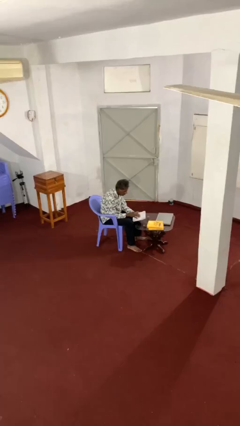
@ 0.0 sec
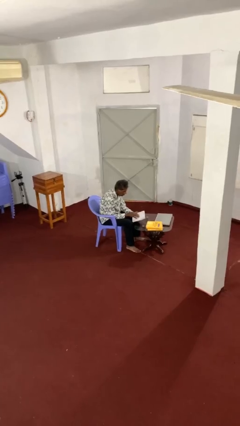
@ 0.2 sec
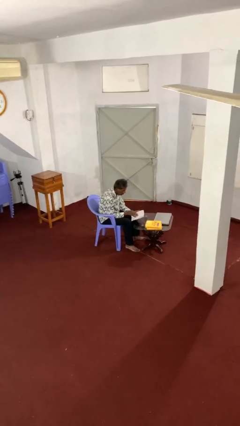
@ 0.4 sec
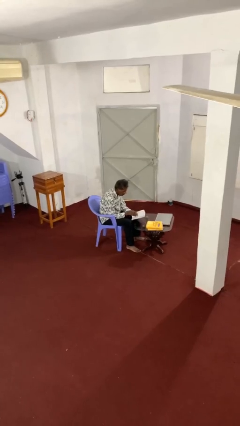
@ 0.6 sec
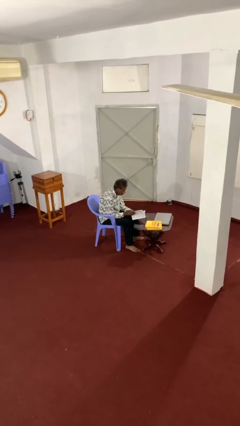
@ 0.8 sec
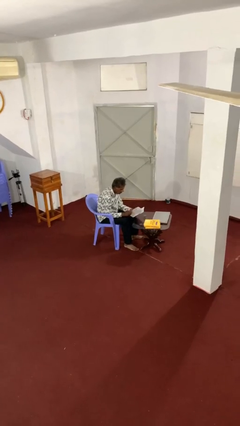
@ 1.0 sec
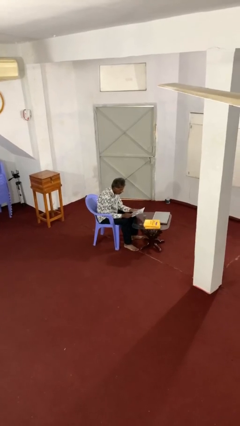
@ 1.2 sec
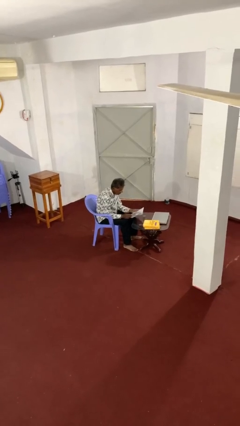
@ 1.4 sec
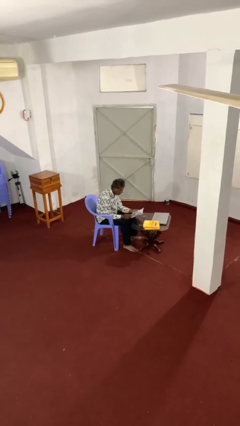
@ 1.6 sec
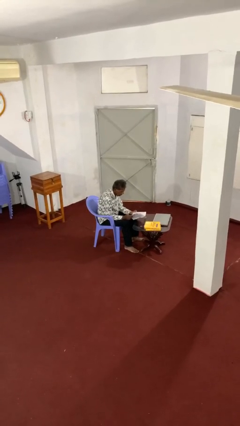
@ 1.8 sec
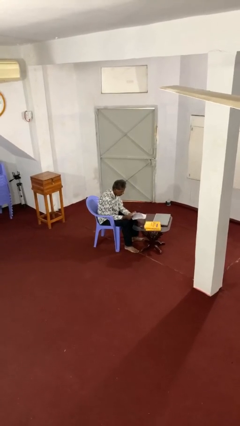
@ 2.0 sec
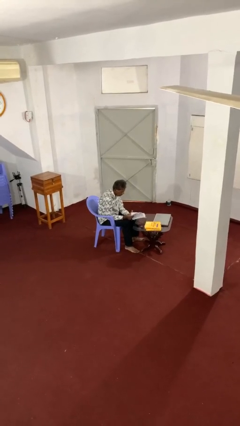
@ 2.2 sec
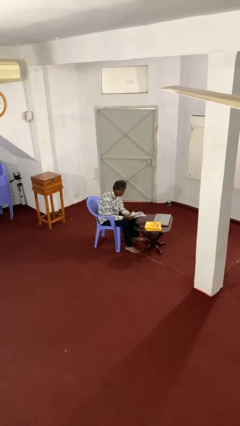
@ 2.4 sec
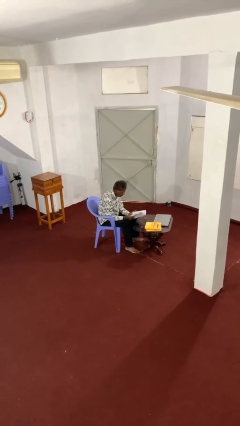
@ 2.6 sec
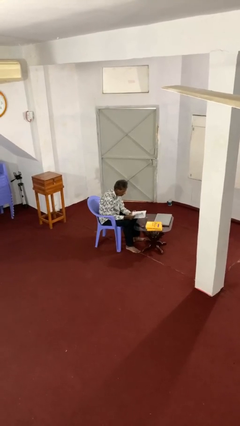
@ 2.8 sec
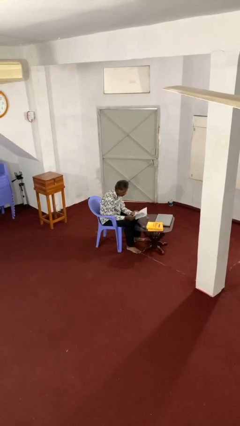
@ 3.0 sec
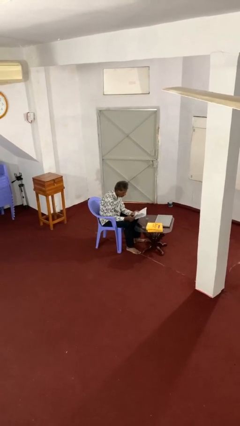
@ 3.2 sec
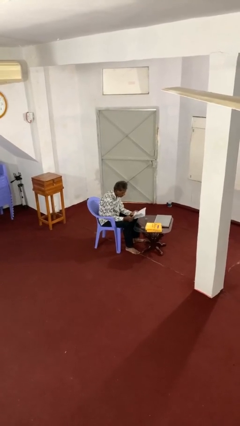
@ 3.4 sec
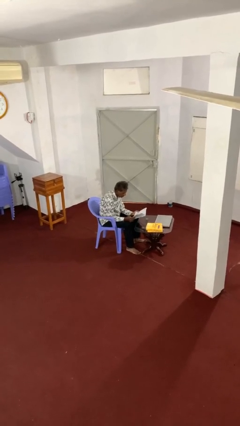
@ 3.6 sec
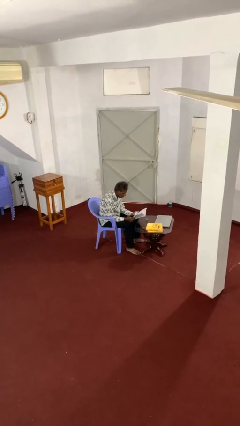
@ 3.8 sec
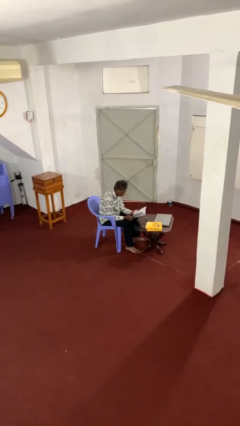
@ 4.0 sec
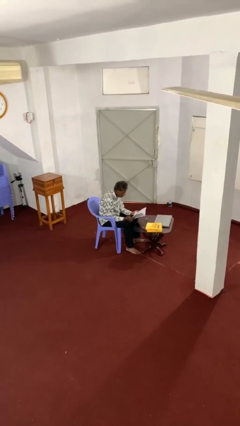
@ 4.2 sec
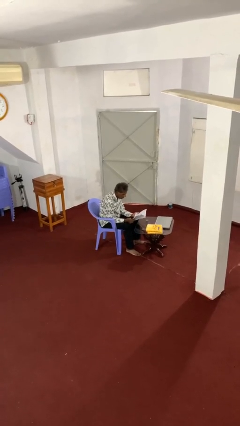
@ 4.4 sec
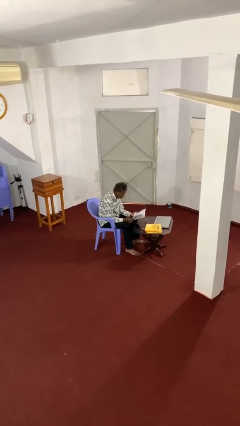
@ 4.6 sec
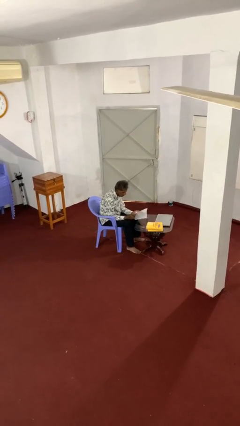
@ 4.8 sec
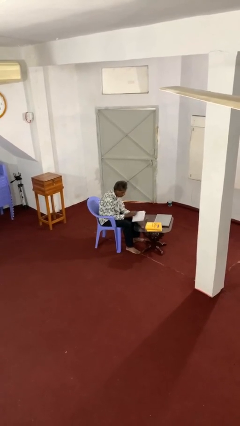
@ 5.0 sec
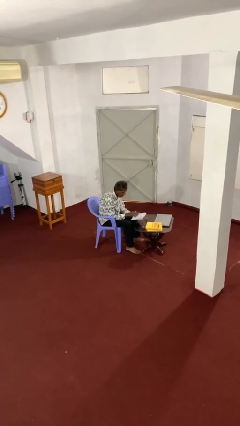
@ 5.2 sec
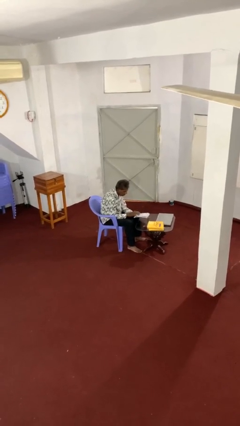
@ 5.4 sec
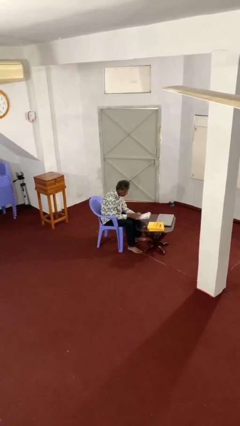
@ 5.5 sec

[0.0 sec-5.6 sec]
person reads document

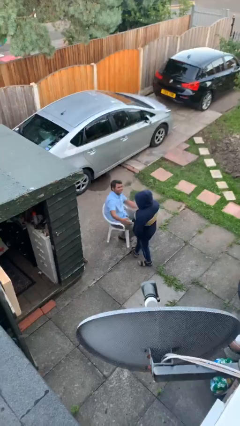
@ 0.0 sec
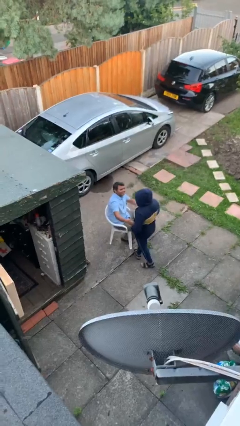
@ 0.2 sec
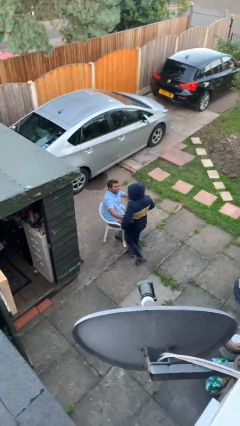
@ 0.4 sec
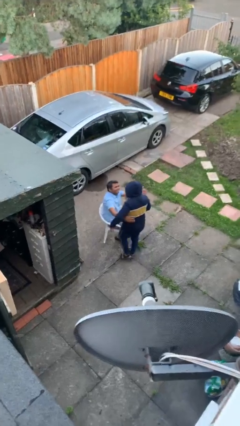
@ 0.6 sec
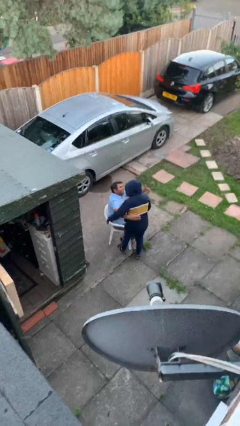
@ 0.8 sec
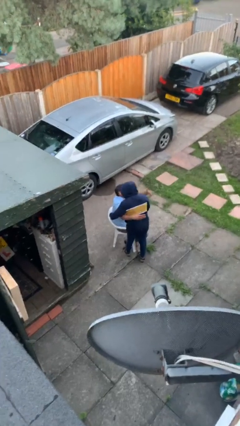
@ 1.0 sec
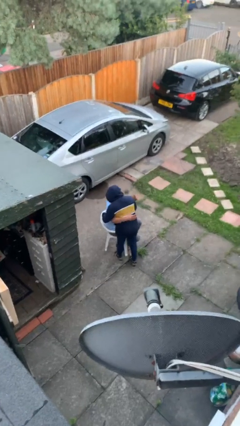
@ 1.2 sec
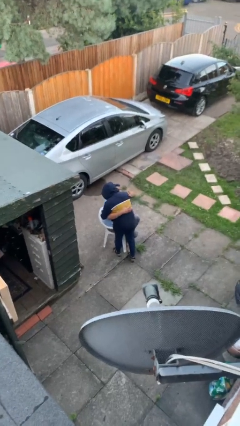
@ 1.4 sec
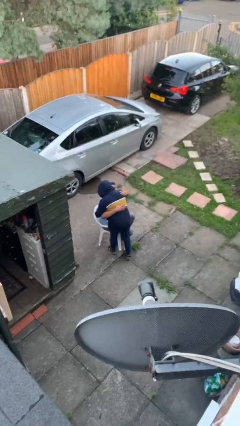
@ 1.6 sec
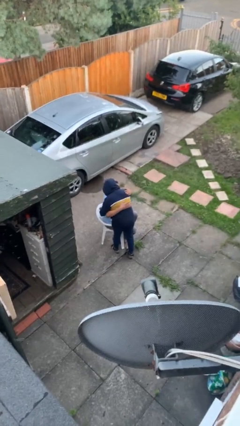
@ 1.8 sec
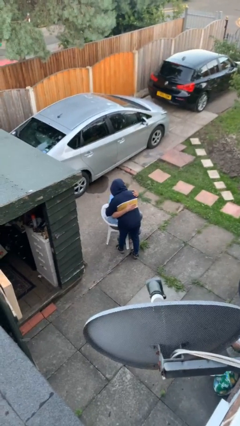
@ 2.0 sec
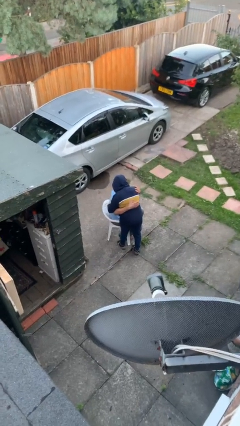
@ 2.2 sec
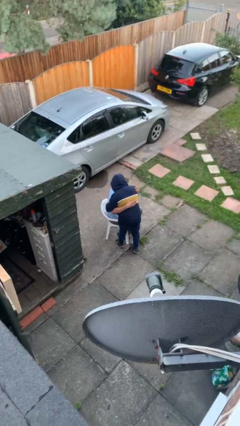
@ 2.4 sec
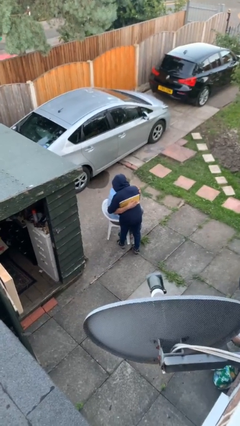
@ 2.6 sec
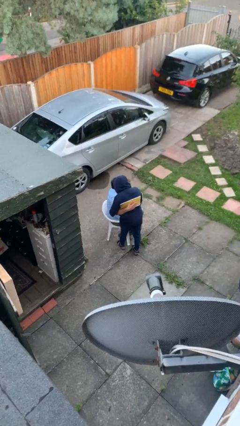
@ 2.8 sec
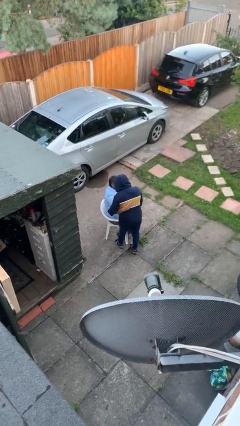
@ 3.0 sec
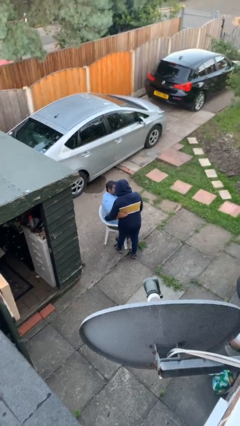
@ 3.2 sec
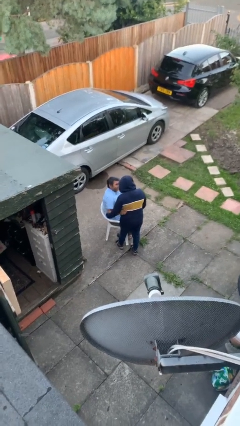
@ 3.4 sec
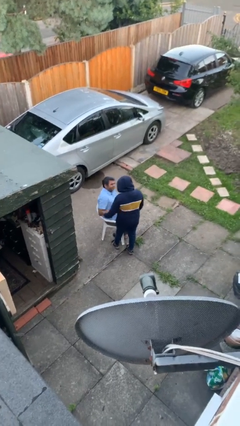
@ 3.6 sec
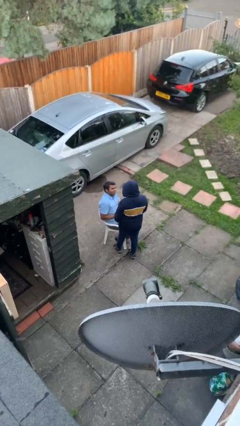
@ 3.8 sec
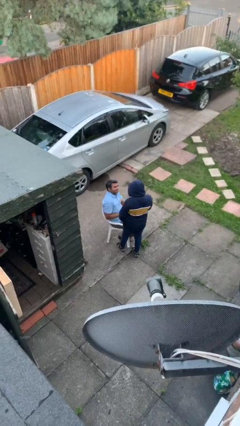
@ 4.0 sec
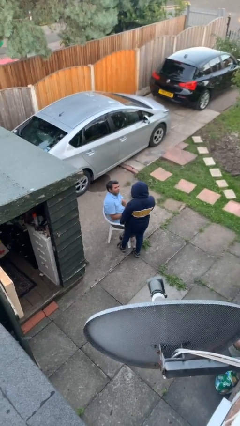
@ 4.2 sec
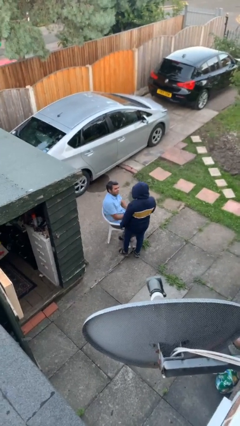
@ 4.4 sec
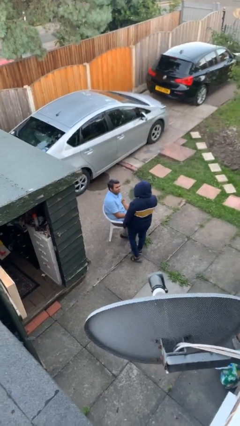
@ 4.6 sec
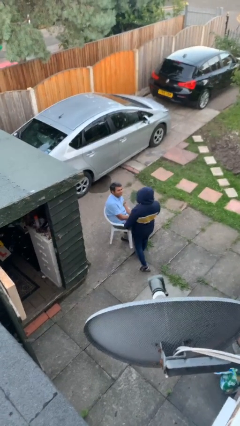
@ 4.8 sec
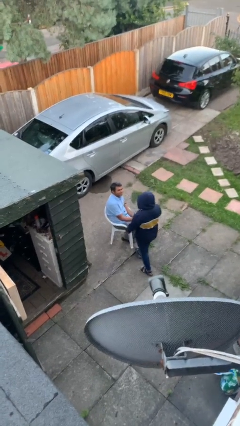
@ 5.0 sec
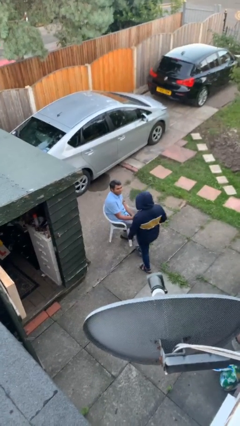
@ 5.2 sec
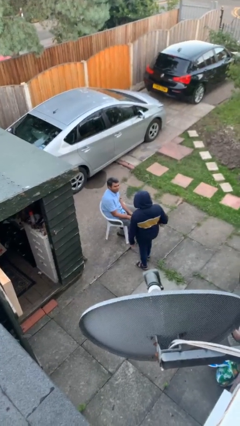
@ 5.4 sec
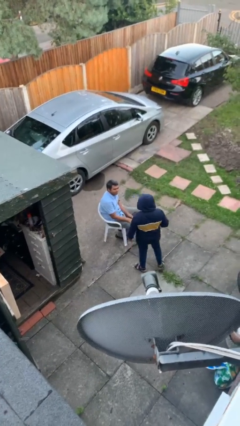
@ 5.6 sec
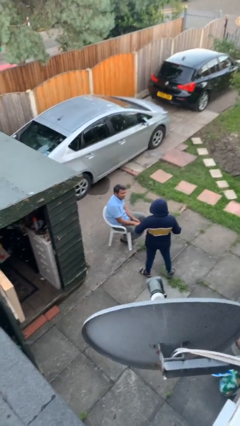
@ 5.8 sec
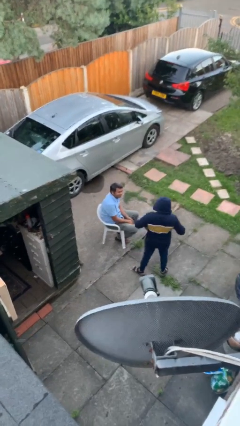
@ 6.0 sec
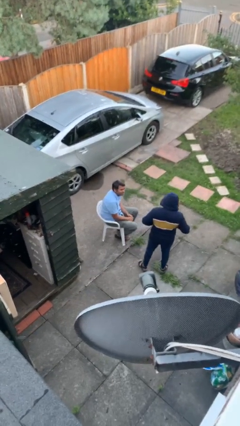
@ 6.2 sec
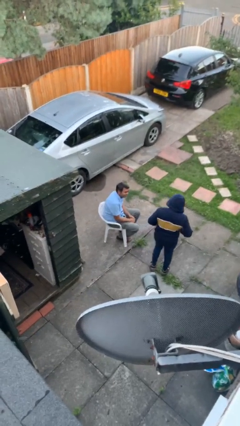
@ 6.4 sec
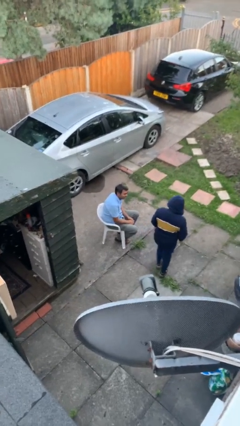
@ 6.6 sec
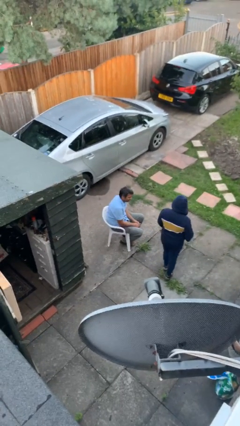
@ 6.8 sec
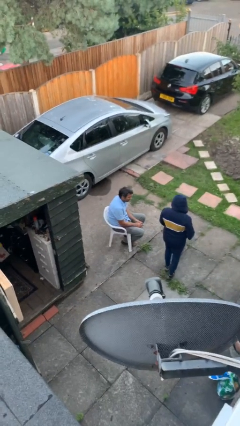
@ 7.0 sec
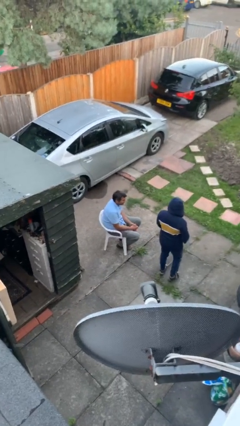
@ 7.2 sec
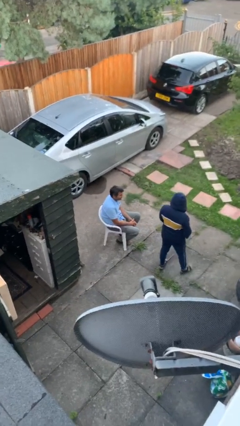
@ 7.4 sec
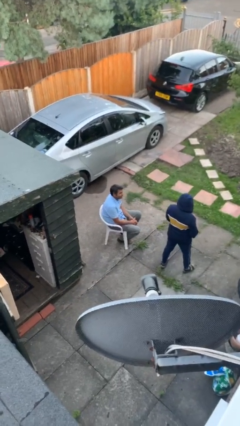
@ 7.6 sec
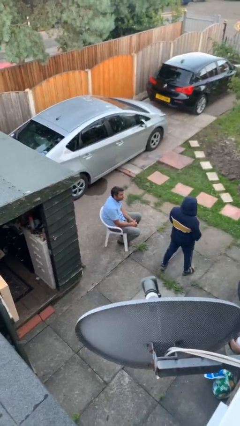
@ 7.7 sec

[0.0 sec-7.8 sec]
person embraces person

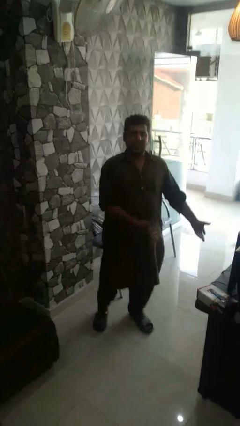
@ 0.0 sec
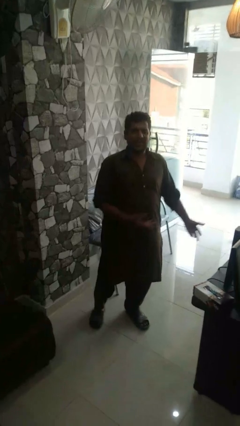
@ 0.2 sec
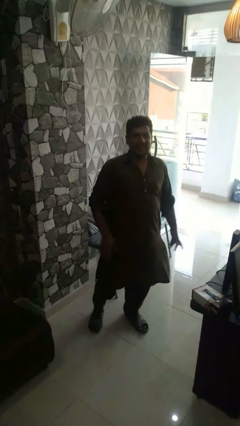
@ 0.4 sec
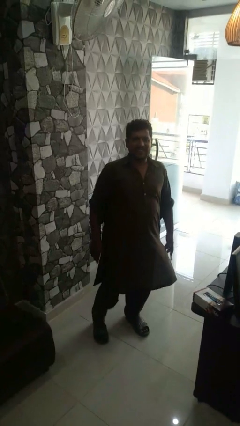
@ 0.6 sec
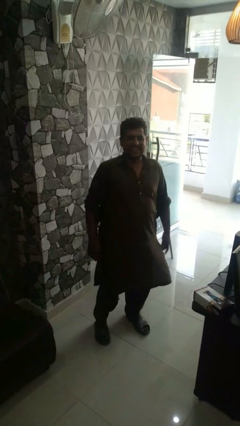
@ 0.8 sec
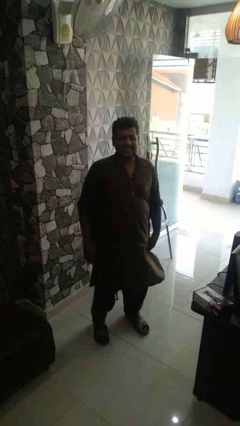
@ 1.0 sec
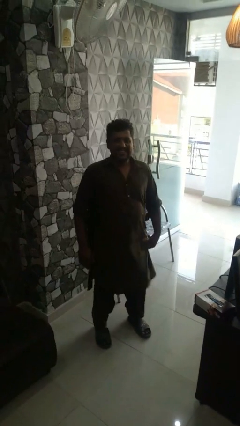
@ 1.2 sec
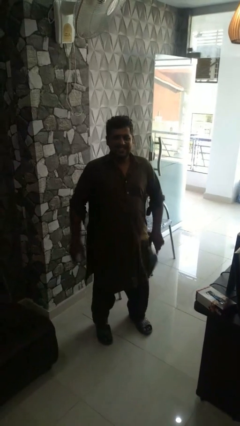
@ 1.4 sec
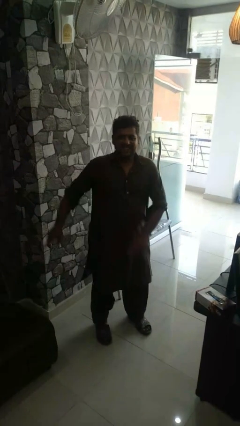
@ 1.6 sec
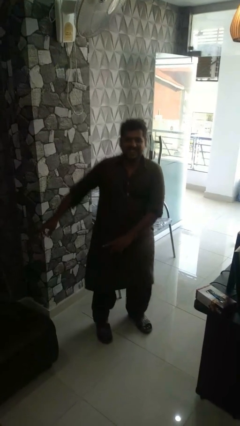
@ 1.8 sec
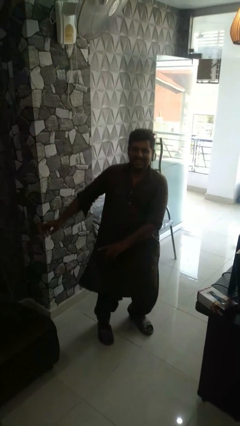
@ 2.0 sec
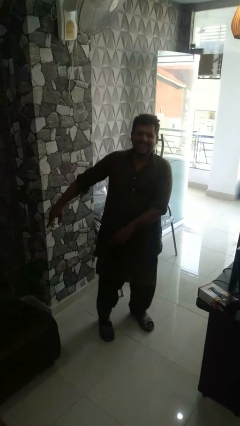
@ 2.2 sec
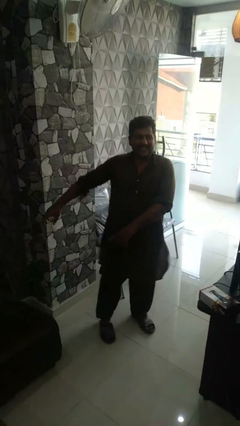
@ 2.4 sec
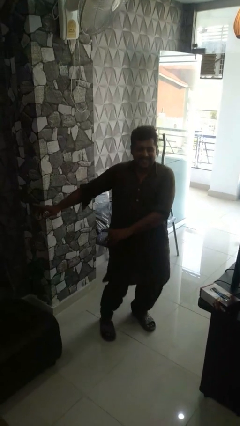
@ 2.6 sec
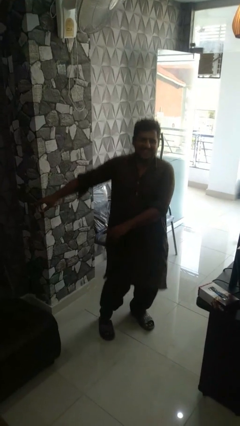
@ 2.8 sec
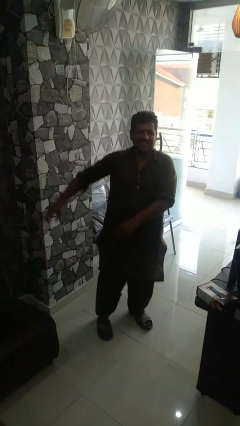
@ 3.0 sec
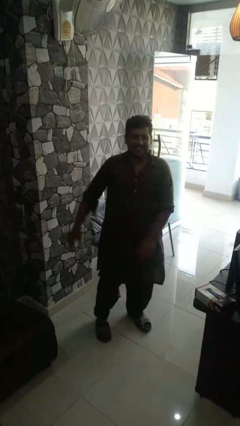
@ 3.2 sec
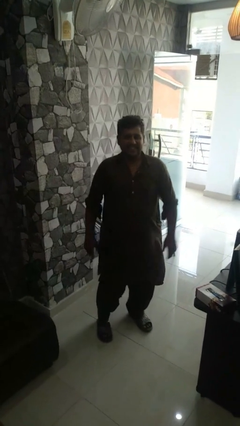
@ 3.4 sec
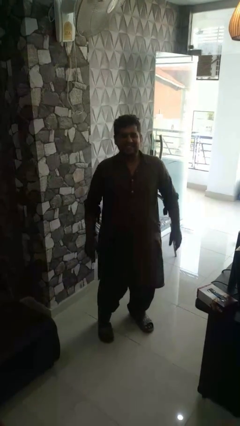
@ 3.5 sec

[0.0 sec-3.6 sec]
person dances in place

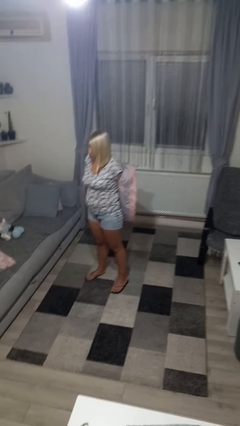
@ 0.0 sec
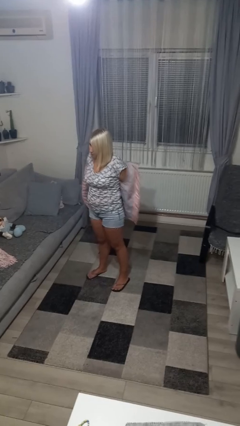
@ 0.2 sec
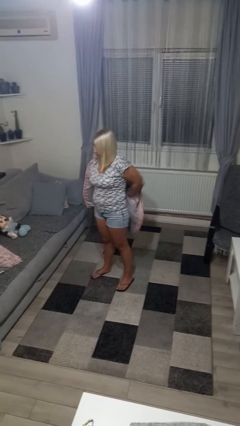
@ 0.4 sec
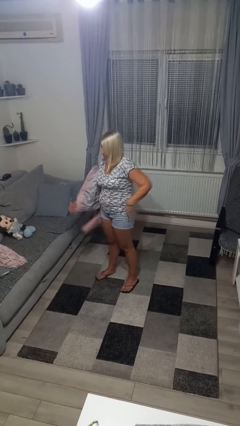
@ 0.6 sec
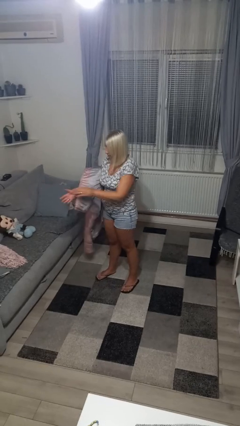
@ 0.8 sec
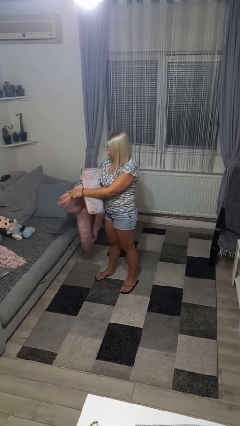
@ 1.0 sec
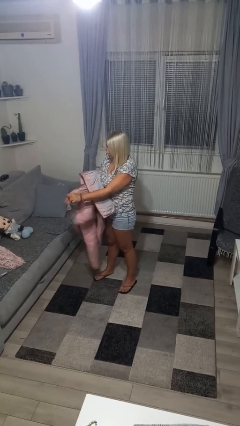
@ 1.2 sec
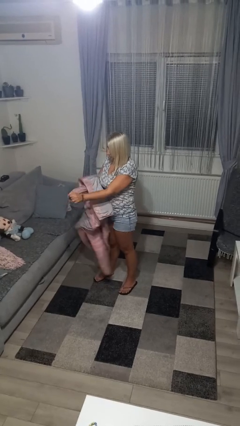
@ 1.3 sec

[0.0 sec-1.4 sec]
person takes off jacket
